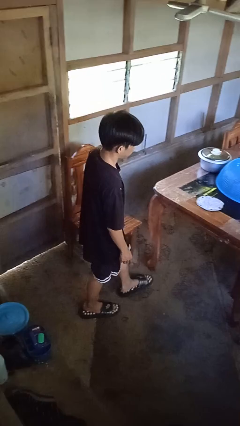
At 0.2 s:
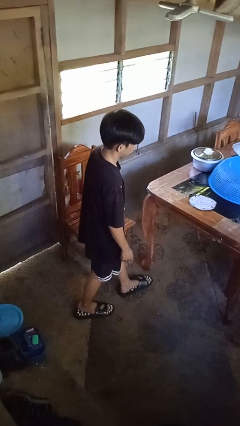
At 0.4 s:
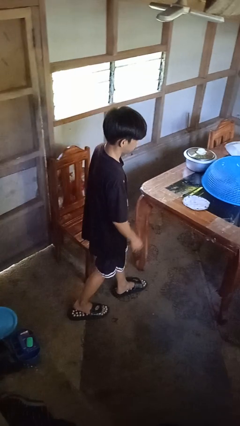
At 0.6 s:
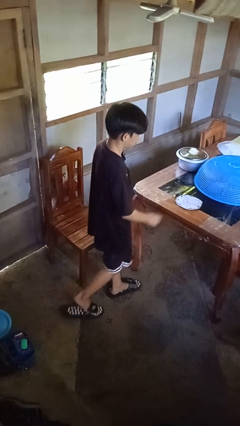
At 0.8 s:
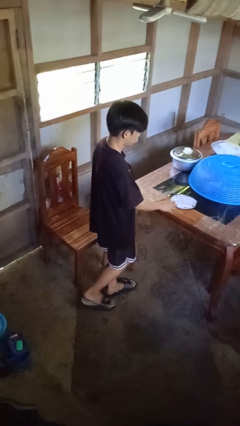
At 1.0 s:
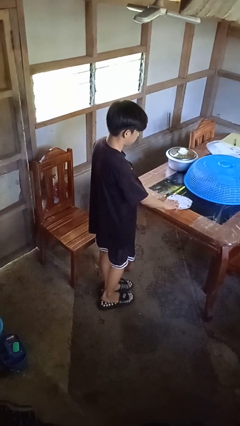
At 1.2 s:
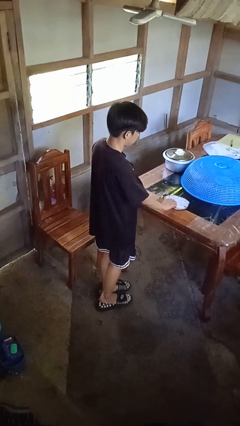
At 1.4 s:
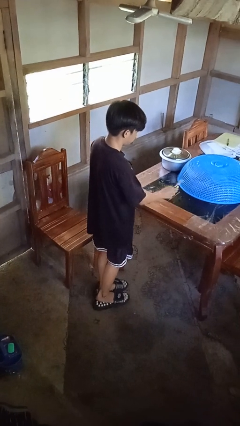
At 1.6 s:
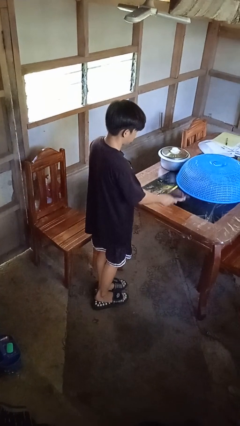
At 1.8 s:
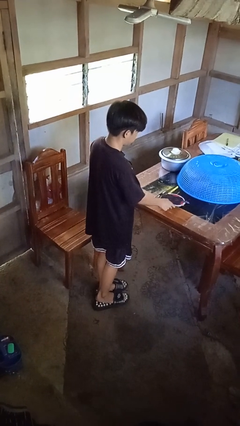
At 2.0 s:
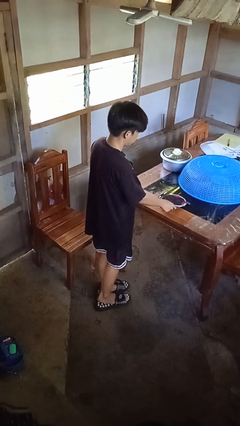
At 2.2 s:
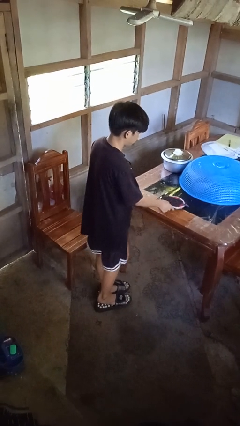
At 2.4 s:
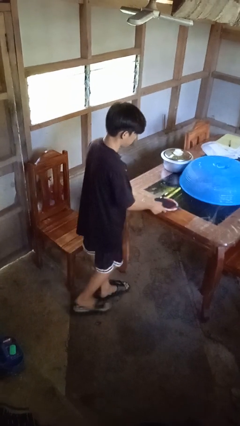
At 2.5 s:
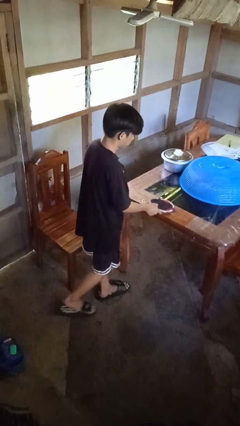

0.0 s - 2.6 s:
person picks up object from table

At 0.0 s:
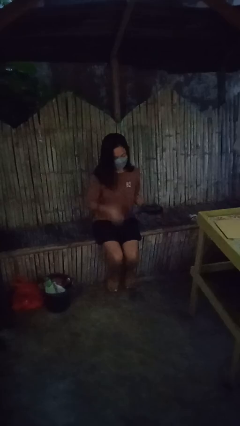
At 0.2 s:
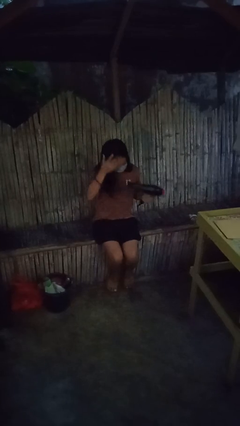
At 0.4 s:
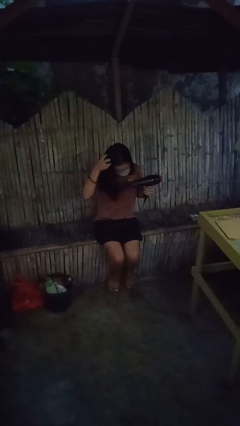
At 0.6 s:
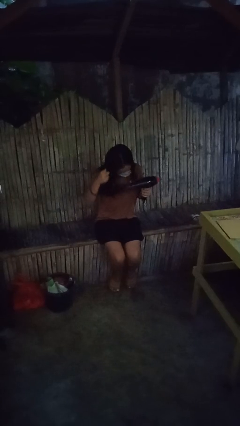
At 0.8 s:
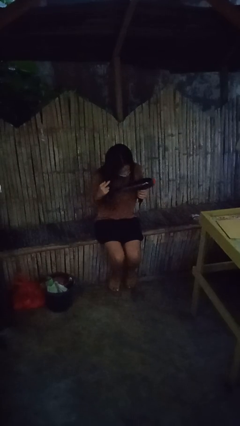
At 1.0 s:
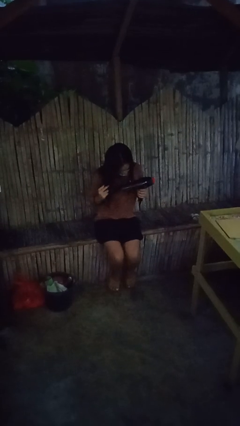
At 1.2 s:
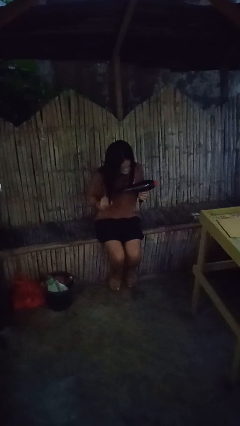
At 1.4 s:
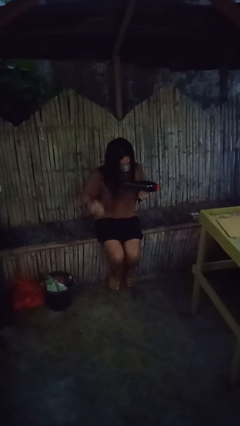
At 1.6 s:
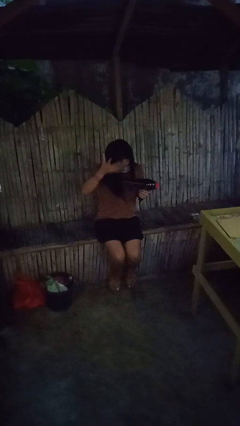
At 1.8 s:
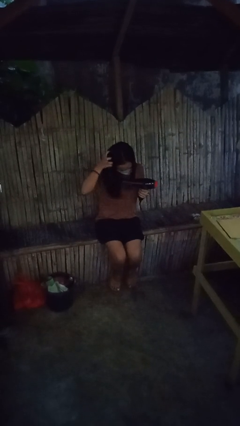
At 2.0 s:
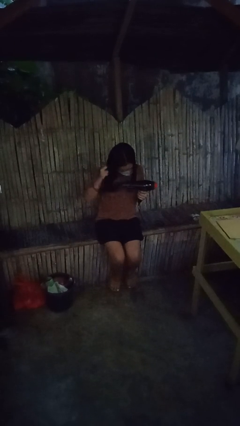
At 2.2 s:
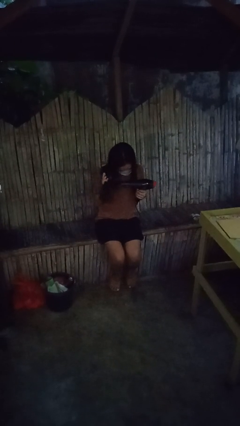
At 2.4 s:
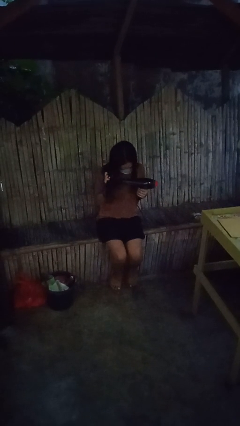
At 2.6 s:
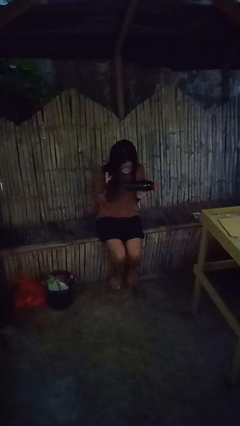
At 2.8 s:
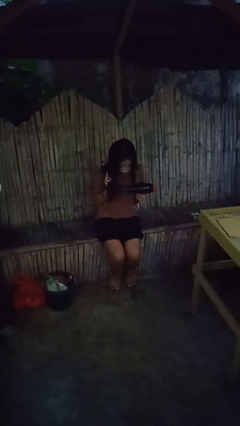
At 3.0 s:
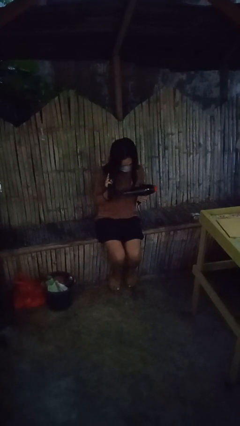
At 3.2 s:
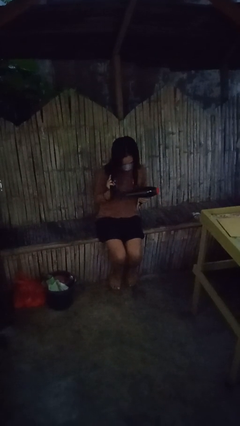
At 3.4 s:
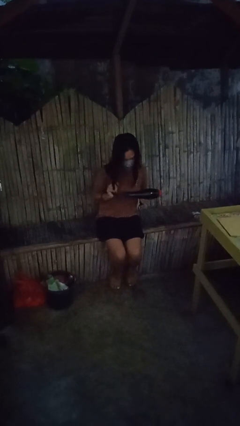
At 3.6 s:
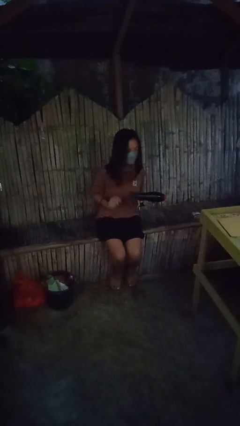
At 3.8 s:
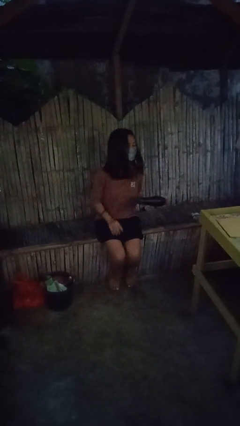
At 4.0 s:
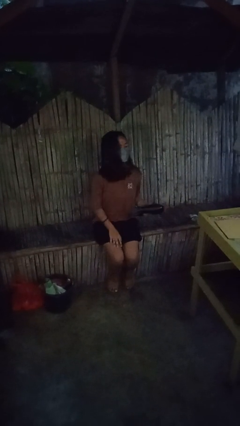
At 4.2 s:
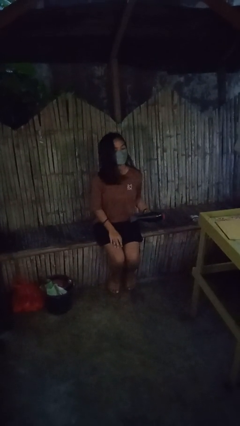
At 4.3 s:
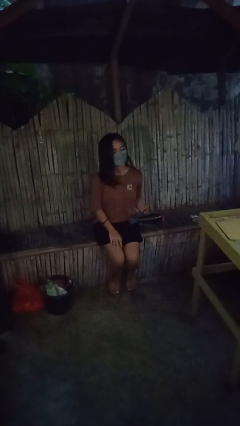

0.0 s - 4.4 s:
person dries hair with hairdryer

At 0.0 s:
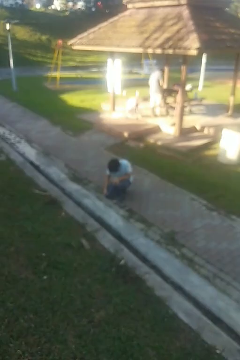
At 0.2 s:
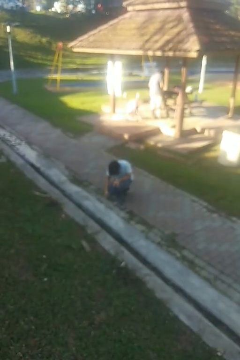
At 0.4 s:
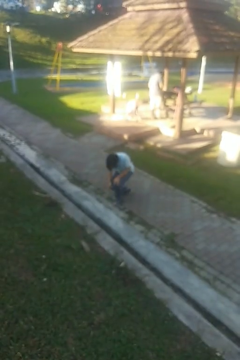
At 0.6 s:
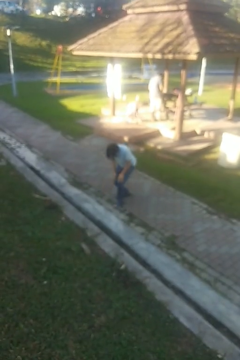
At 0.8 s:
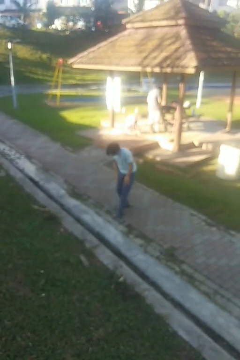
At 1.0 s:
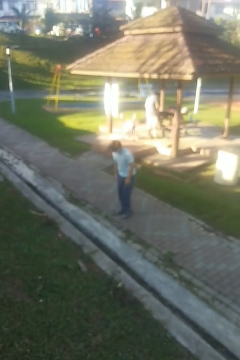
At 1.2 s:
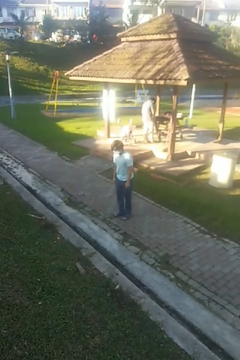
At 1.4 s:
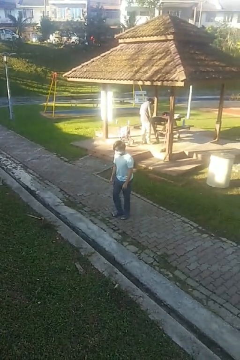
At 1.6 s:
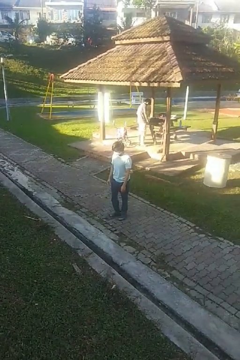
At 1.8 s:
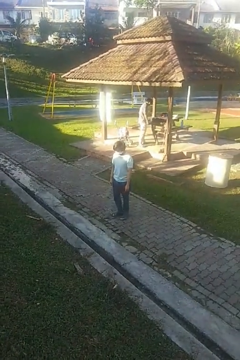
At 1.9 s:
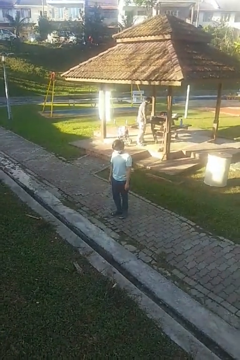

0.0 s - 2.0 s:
person stands up from floor

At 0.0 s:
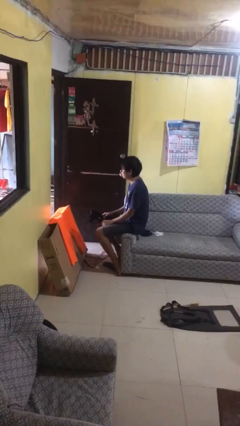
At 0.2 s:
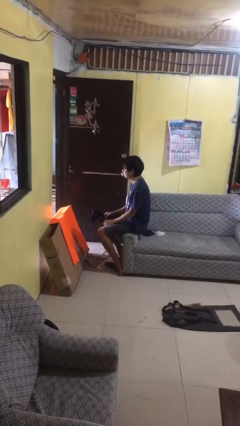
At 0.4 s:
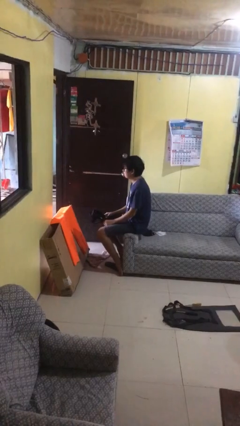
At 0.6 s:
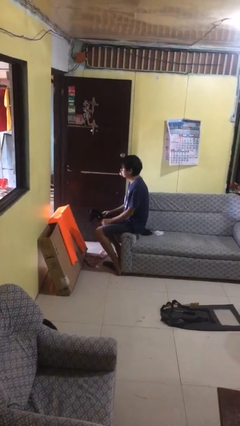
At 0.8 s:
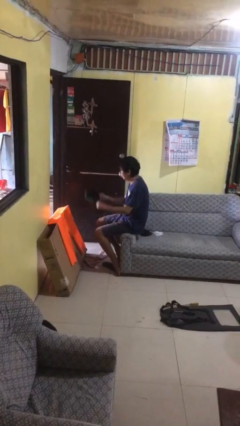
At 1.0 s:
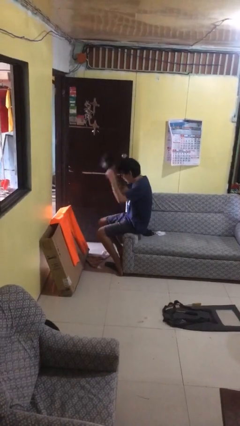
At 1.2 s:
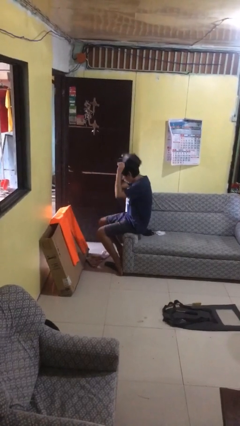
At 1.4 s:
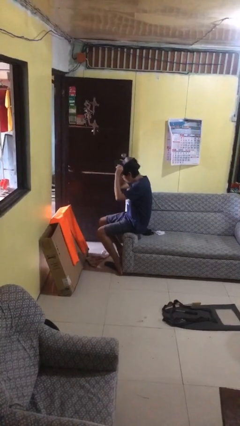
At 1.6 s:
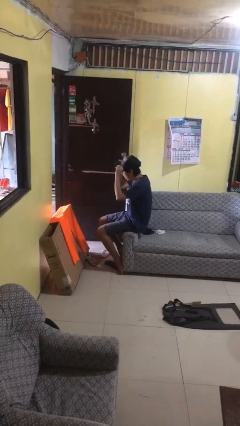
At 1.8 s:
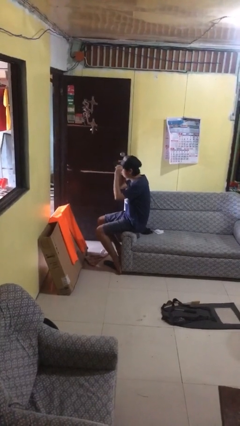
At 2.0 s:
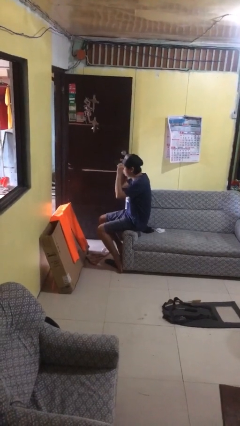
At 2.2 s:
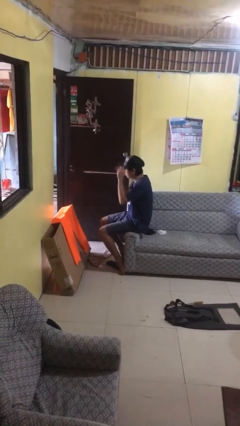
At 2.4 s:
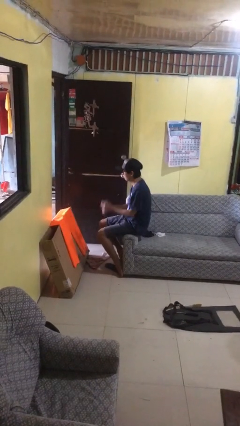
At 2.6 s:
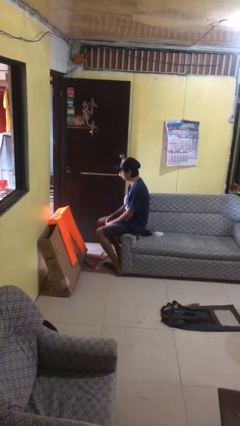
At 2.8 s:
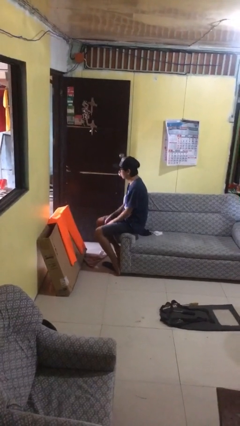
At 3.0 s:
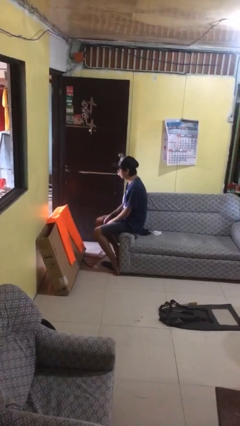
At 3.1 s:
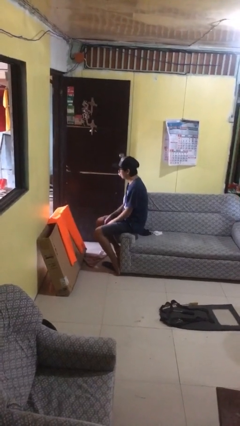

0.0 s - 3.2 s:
person puts on hat

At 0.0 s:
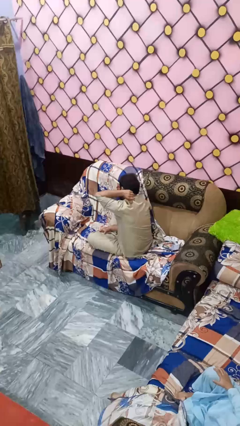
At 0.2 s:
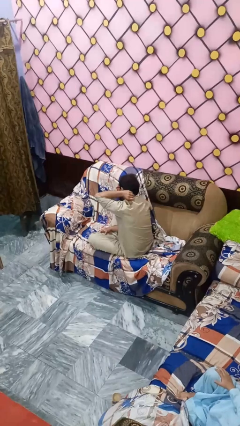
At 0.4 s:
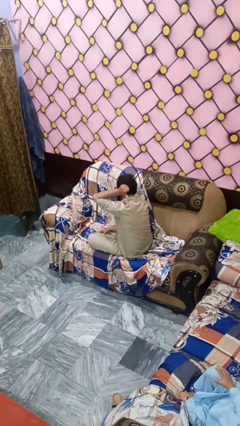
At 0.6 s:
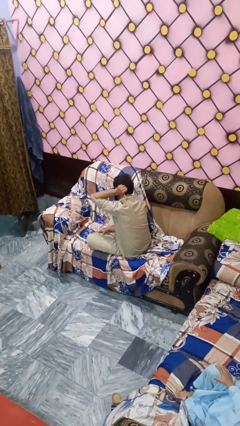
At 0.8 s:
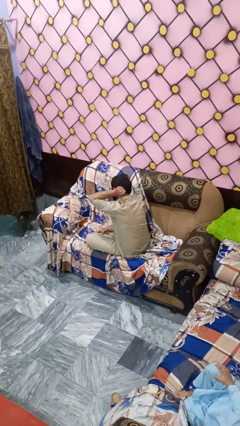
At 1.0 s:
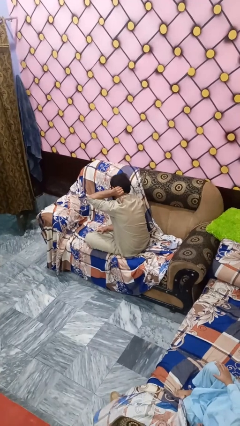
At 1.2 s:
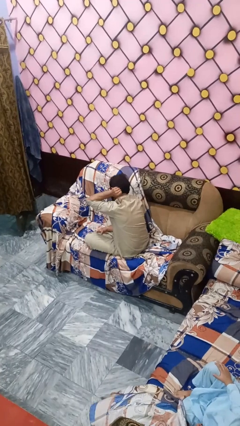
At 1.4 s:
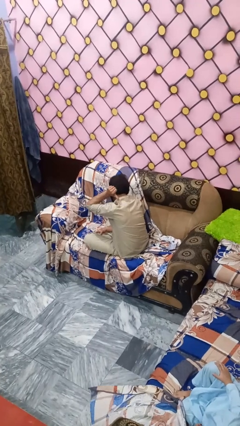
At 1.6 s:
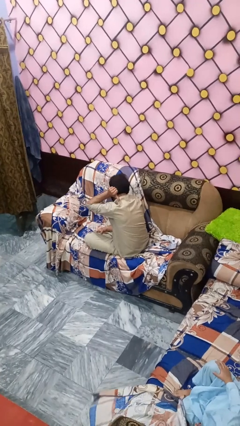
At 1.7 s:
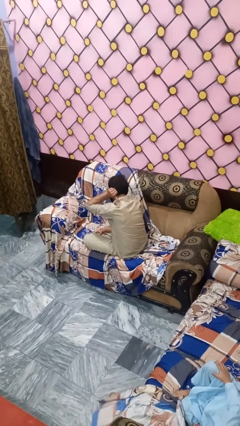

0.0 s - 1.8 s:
person gestures behind me

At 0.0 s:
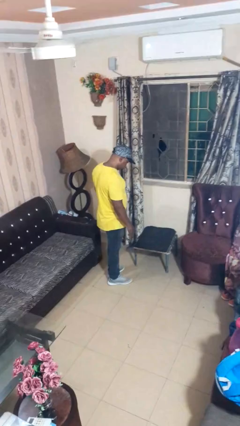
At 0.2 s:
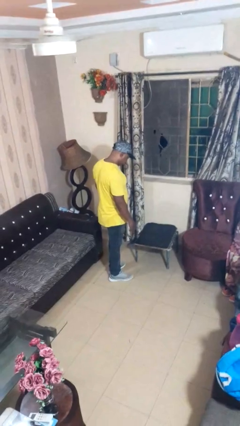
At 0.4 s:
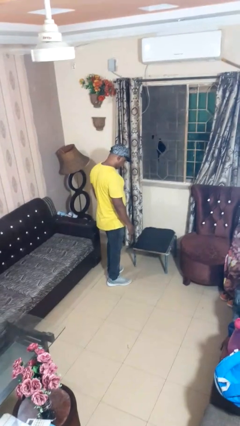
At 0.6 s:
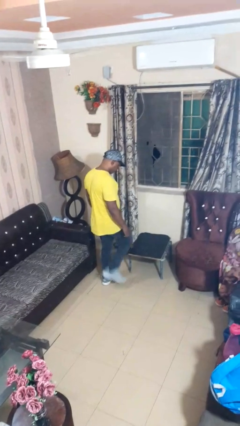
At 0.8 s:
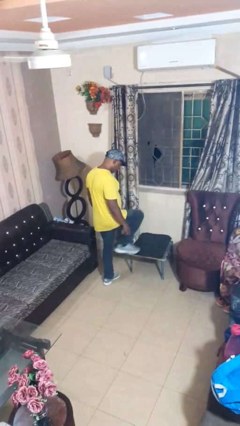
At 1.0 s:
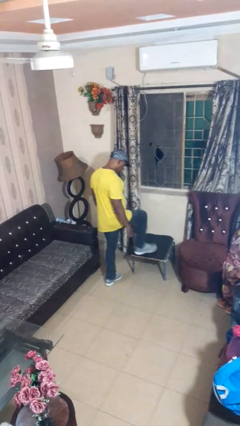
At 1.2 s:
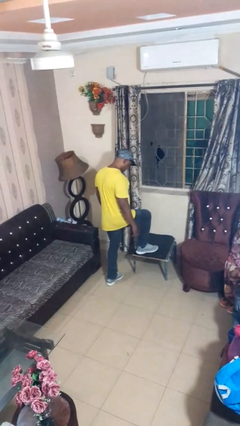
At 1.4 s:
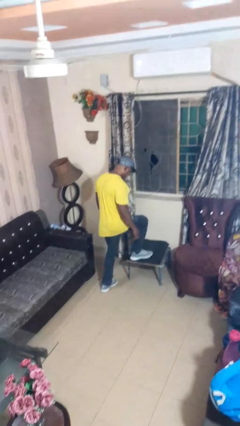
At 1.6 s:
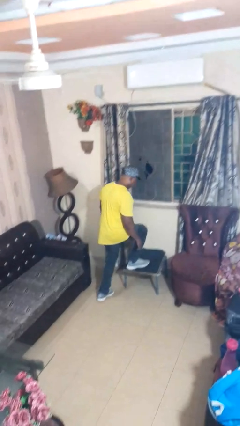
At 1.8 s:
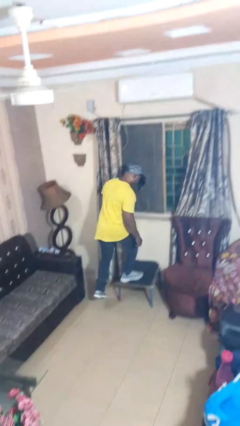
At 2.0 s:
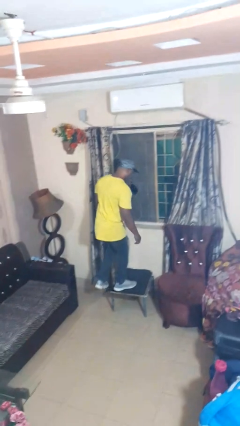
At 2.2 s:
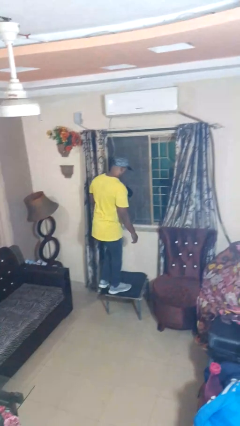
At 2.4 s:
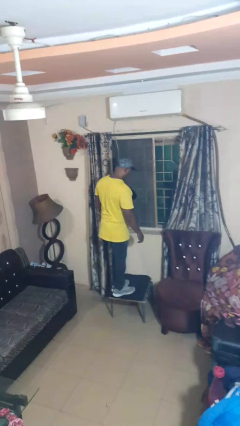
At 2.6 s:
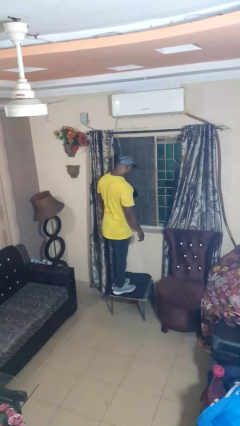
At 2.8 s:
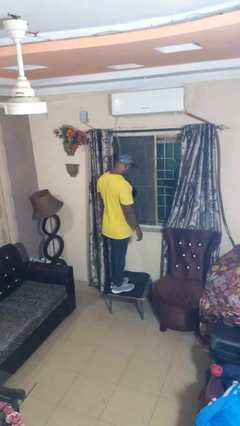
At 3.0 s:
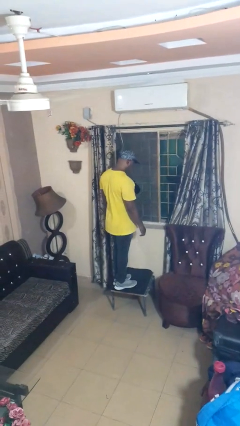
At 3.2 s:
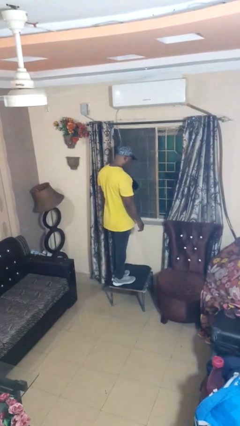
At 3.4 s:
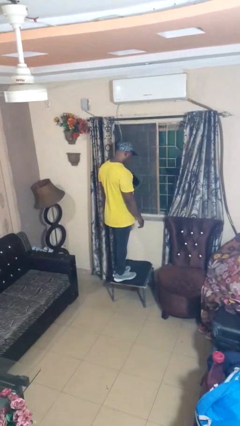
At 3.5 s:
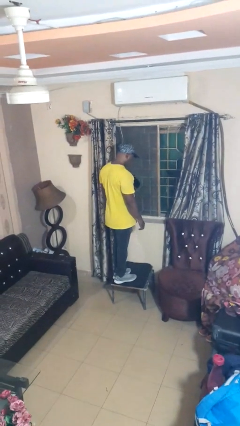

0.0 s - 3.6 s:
person climbs on table

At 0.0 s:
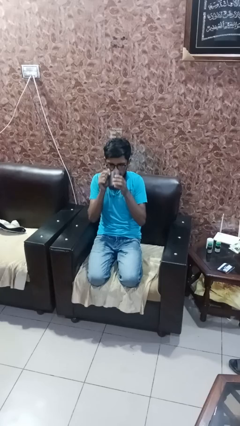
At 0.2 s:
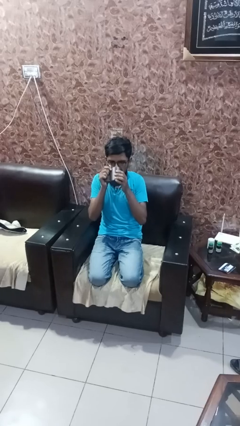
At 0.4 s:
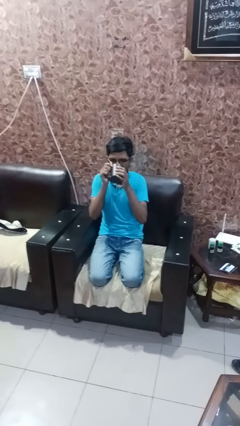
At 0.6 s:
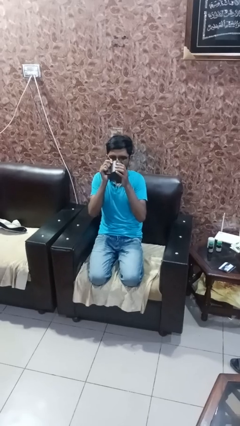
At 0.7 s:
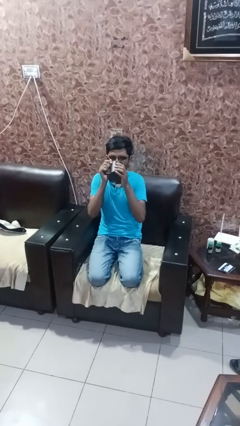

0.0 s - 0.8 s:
person drinks from mug
